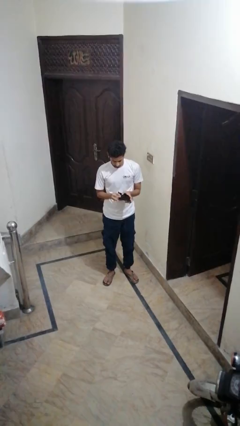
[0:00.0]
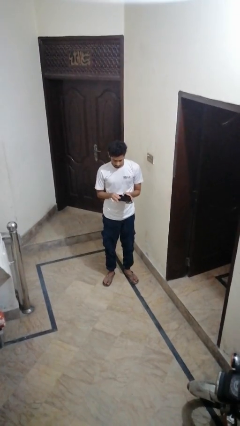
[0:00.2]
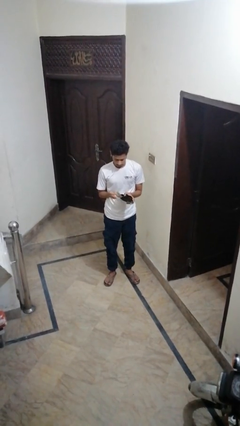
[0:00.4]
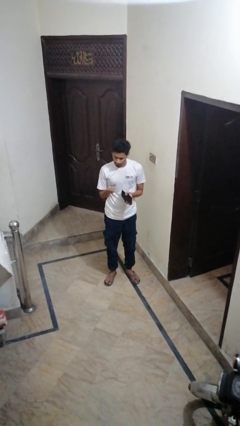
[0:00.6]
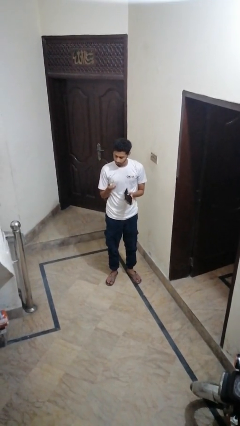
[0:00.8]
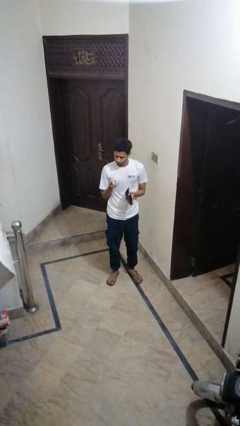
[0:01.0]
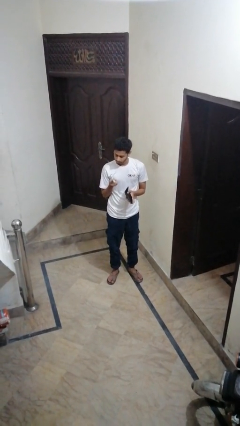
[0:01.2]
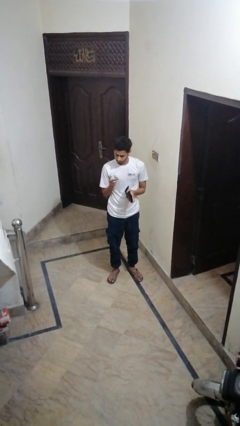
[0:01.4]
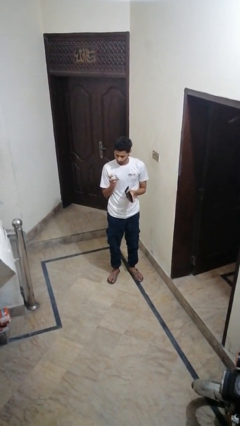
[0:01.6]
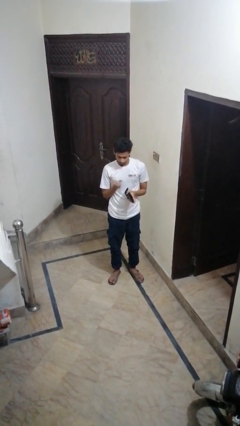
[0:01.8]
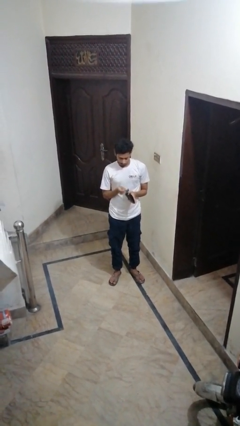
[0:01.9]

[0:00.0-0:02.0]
person takes object from purse

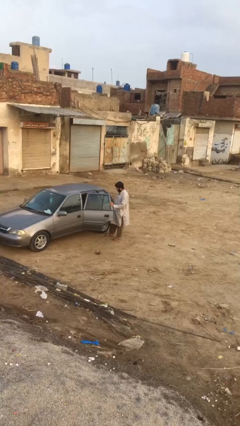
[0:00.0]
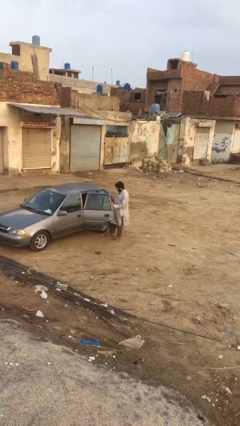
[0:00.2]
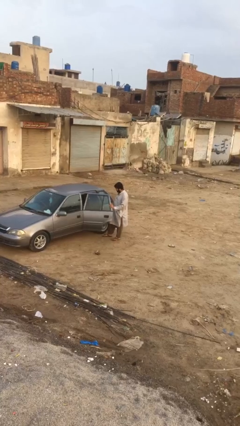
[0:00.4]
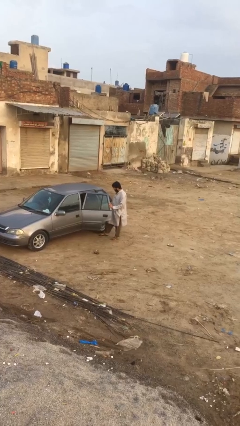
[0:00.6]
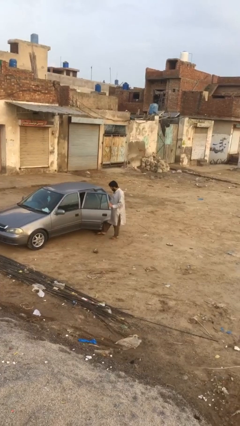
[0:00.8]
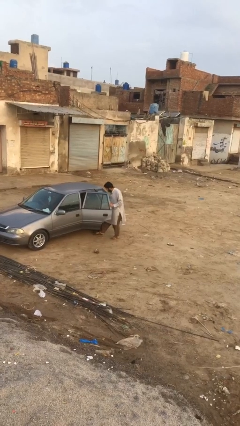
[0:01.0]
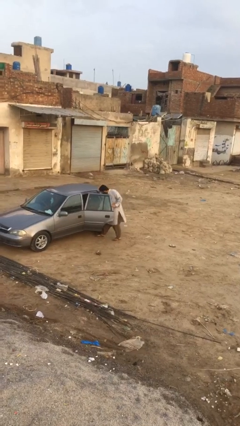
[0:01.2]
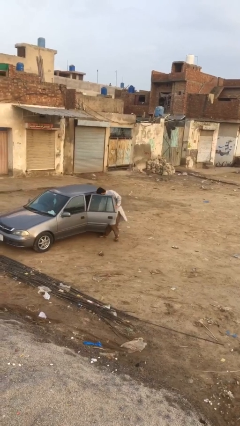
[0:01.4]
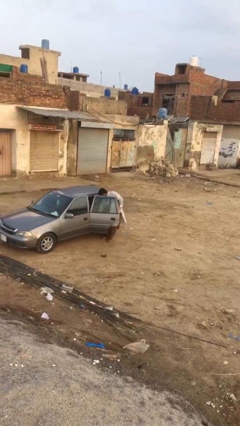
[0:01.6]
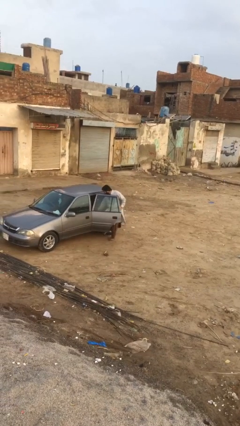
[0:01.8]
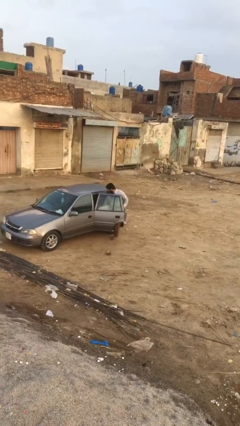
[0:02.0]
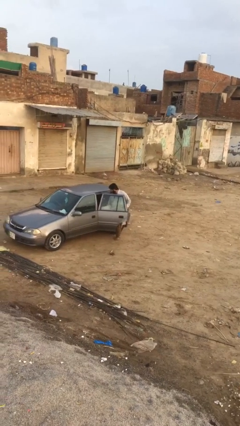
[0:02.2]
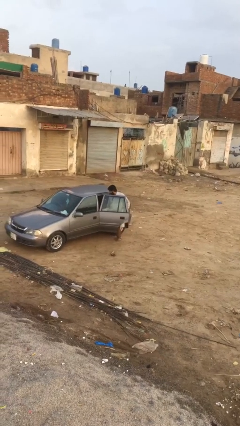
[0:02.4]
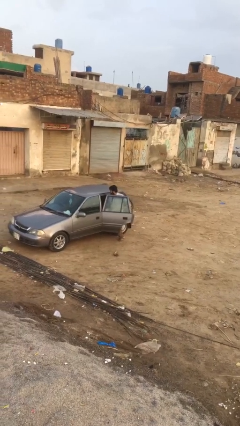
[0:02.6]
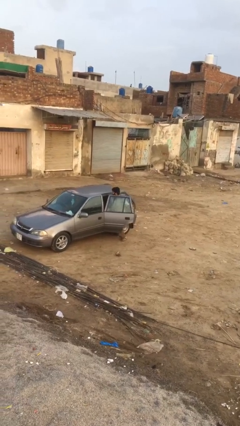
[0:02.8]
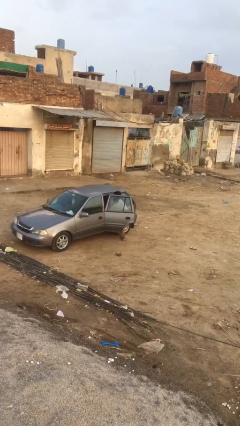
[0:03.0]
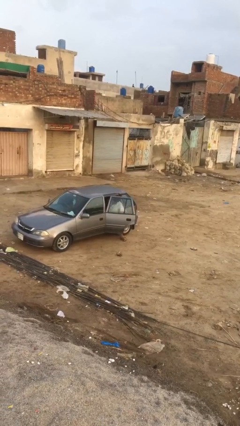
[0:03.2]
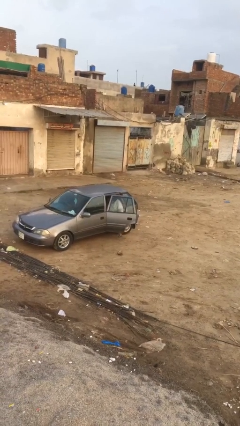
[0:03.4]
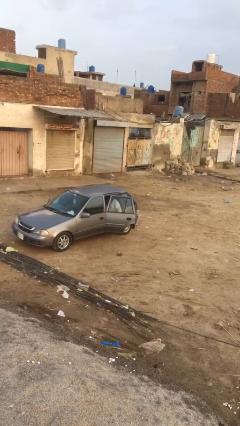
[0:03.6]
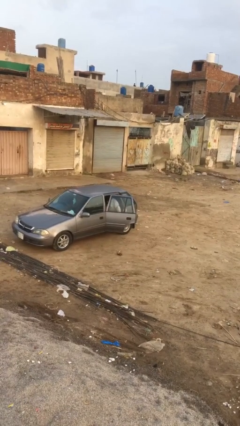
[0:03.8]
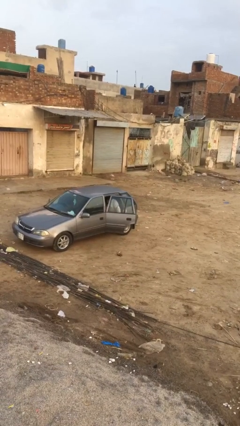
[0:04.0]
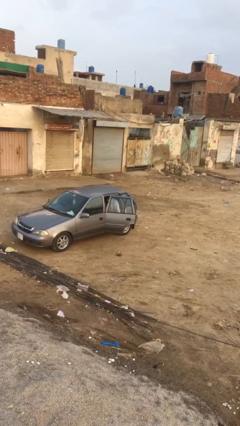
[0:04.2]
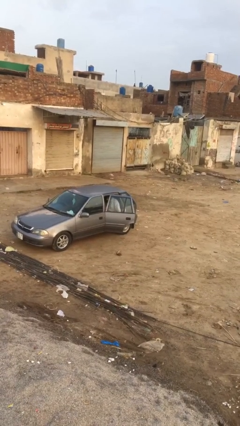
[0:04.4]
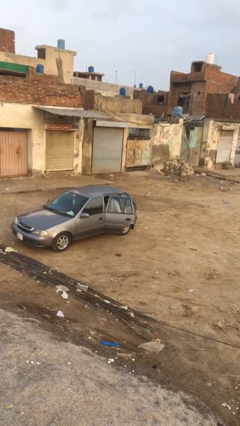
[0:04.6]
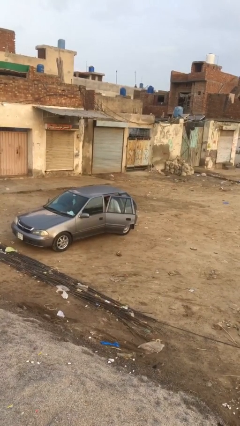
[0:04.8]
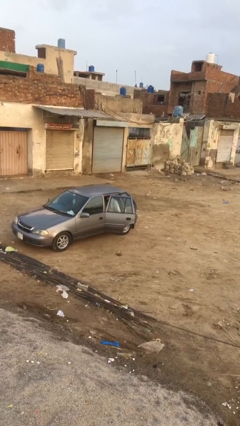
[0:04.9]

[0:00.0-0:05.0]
person enters car

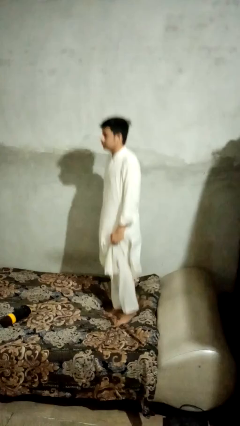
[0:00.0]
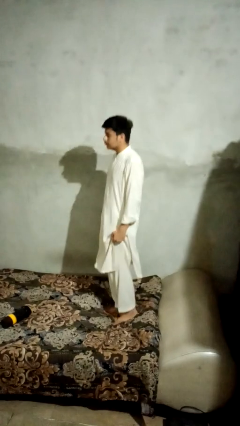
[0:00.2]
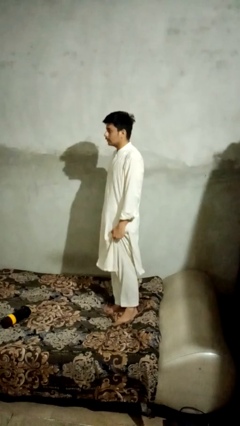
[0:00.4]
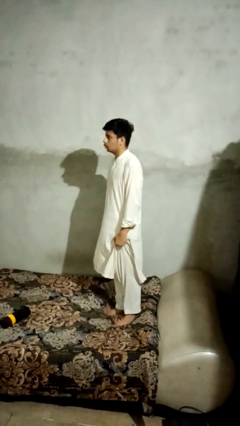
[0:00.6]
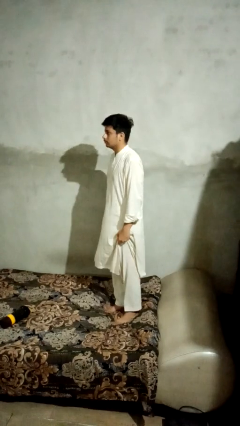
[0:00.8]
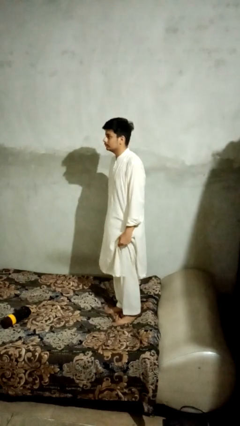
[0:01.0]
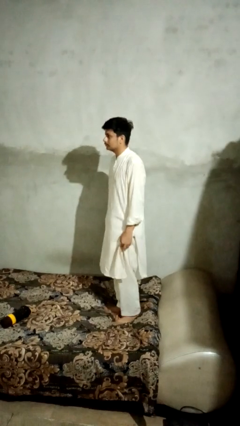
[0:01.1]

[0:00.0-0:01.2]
person jumps on bed

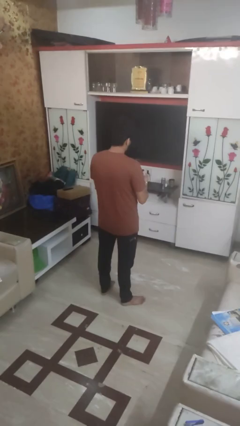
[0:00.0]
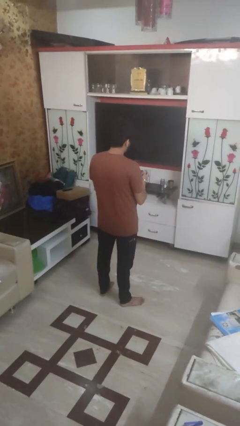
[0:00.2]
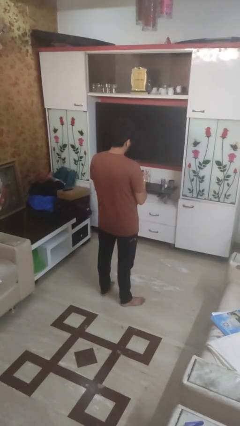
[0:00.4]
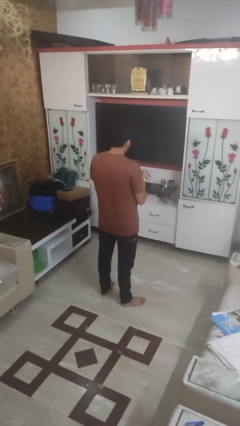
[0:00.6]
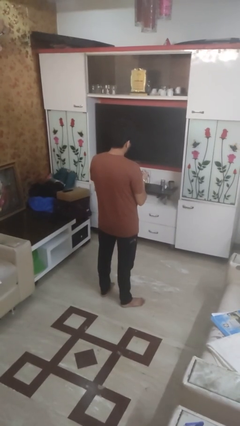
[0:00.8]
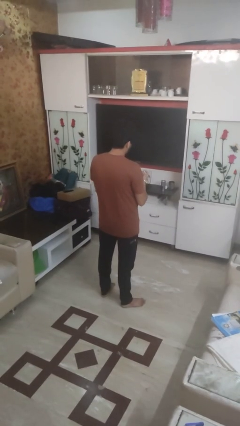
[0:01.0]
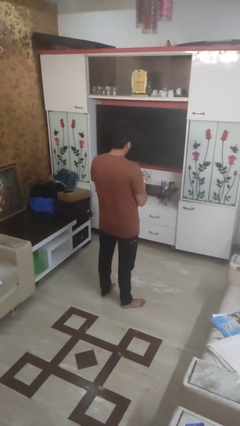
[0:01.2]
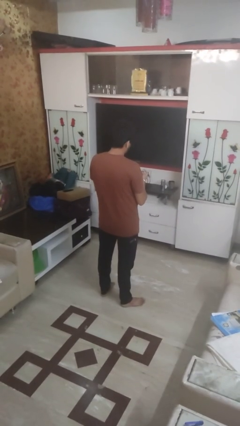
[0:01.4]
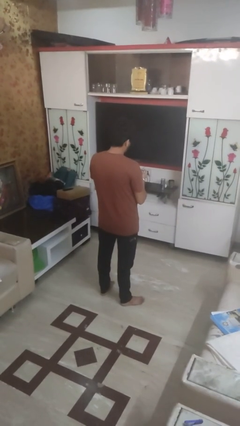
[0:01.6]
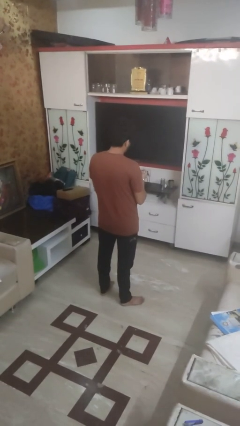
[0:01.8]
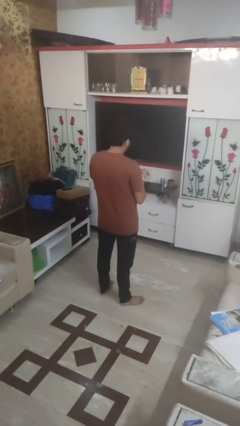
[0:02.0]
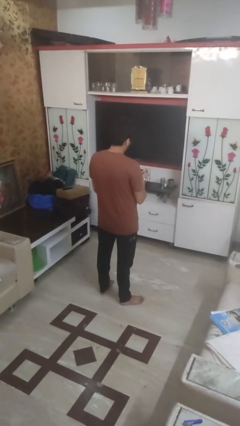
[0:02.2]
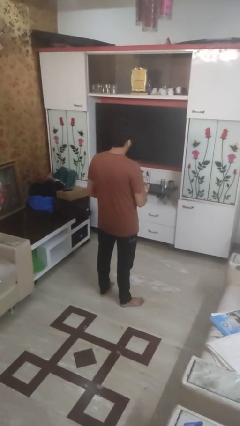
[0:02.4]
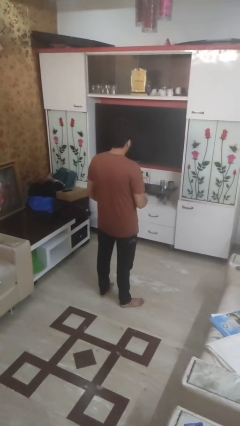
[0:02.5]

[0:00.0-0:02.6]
person files fingernails

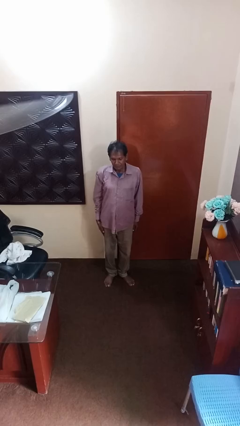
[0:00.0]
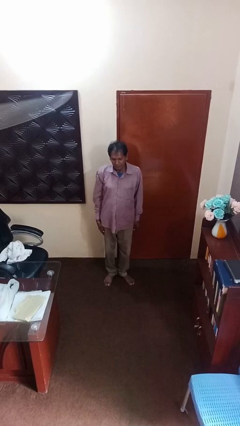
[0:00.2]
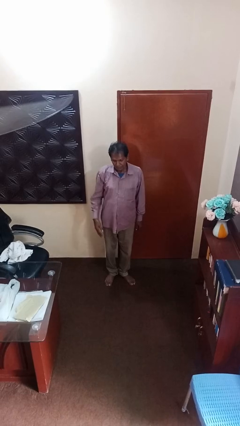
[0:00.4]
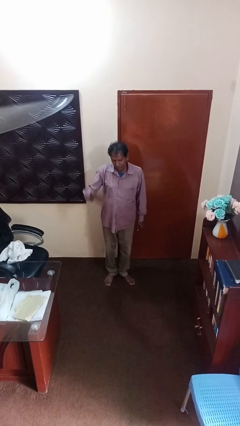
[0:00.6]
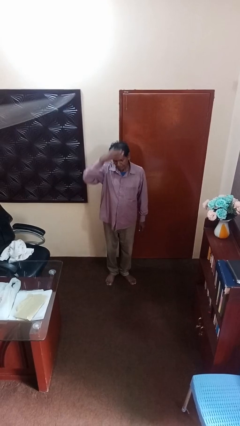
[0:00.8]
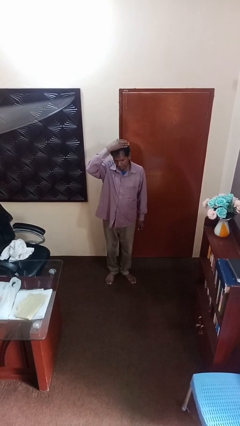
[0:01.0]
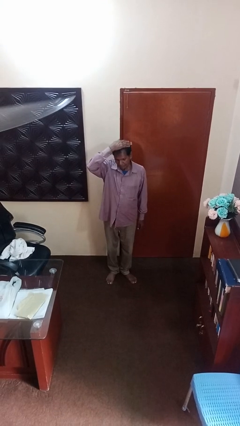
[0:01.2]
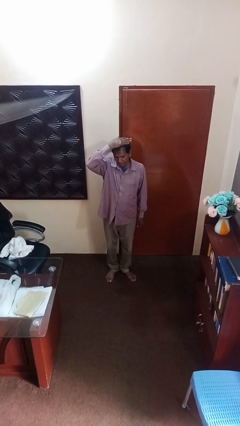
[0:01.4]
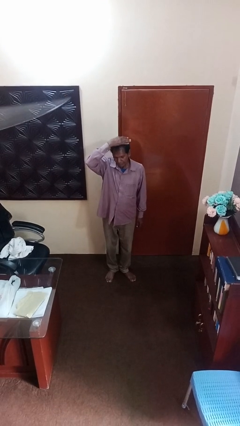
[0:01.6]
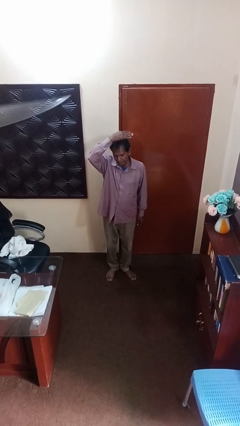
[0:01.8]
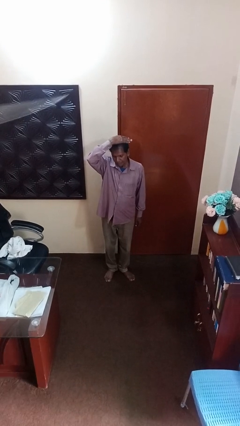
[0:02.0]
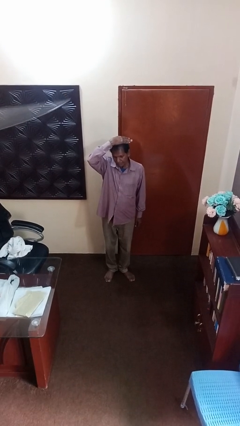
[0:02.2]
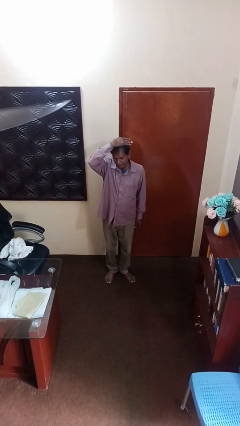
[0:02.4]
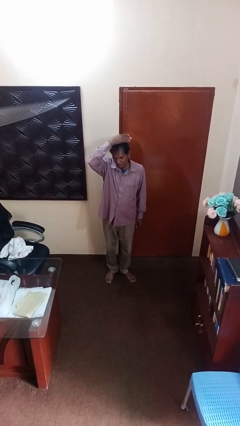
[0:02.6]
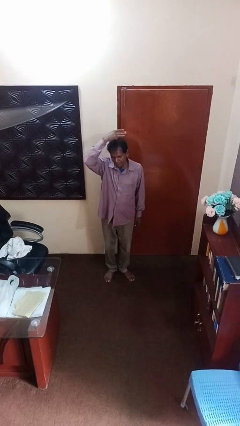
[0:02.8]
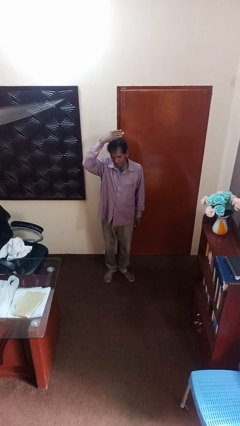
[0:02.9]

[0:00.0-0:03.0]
person pats head

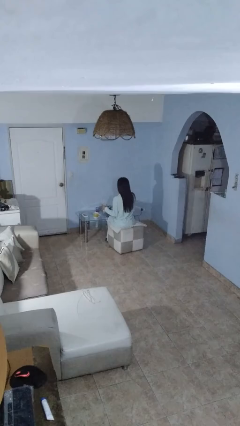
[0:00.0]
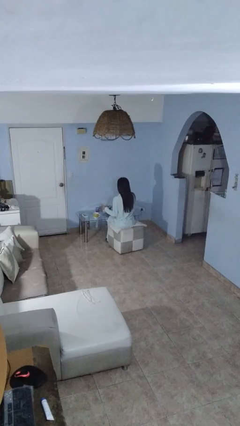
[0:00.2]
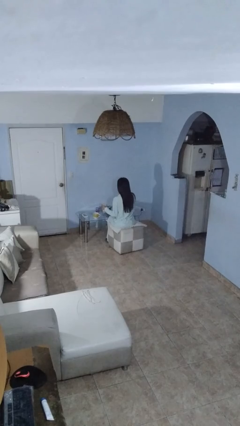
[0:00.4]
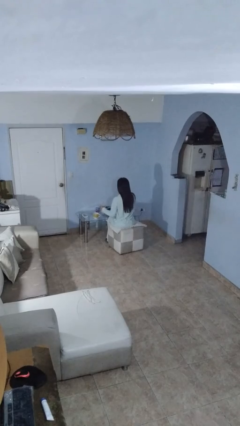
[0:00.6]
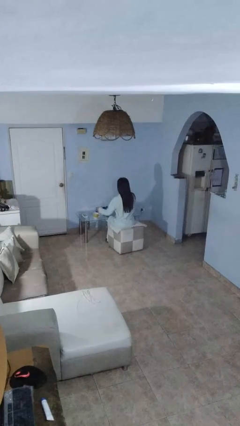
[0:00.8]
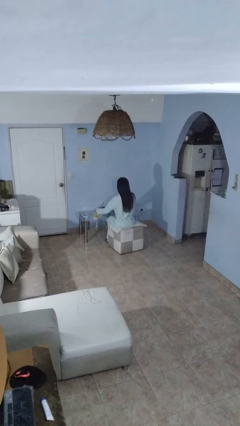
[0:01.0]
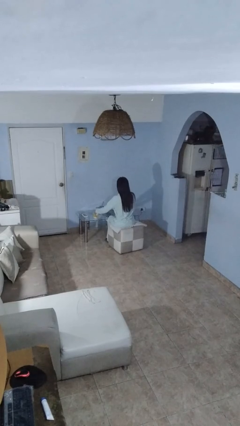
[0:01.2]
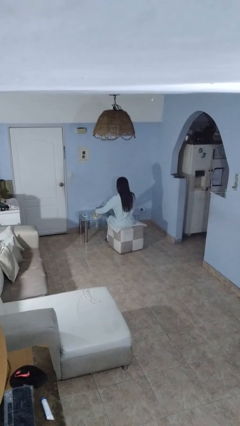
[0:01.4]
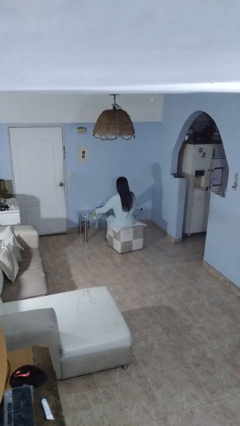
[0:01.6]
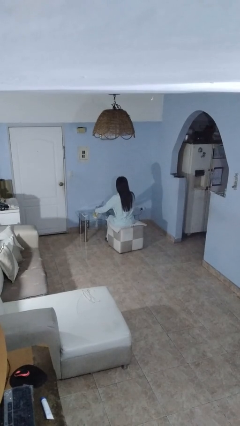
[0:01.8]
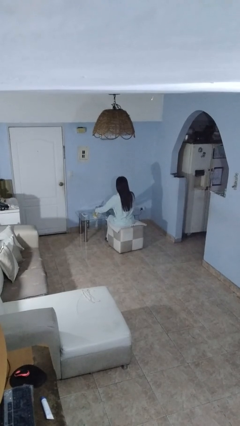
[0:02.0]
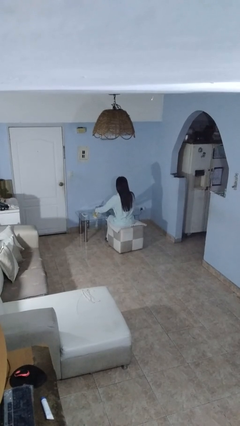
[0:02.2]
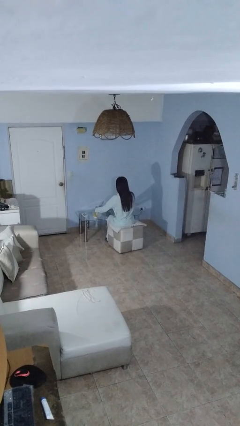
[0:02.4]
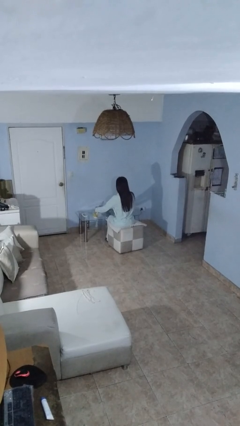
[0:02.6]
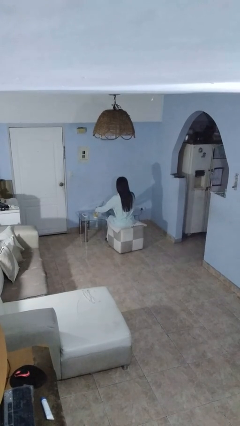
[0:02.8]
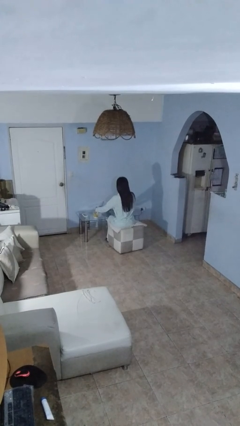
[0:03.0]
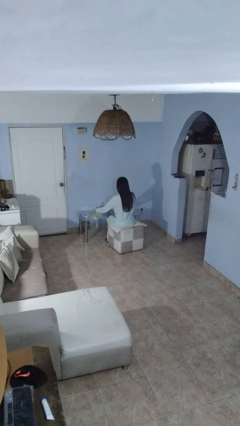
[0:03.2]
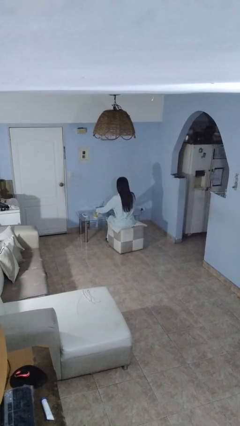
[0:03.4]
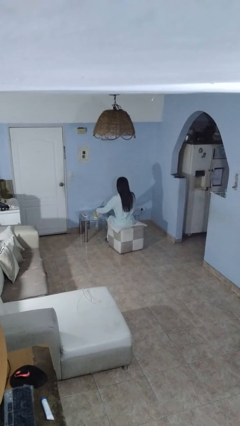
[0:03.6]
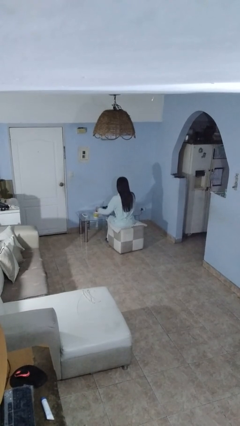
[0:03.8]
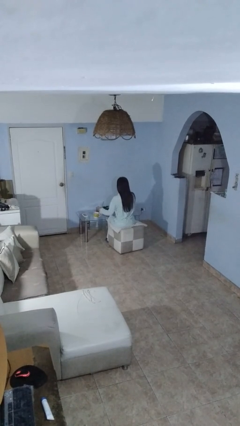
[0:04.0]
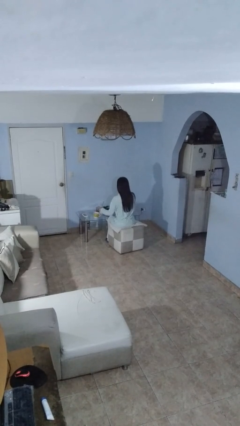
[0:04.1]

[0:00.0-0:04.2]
person pours liquid into cup
